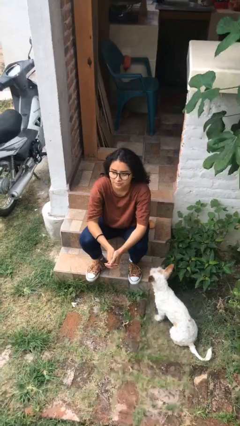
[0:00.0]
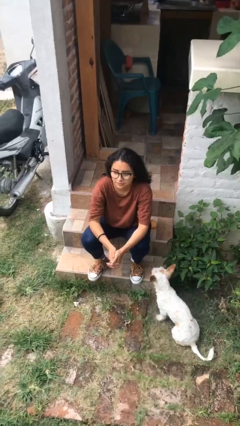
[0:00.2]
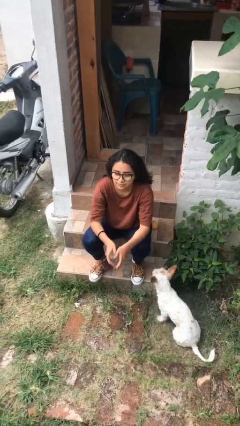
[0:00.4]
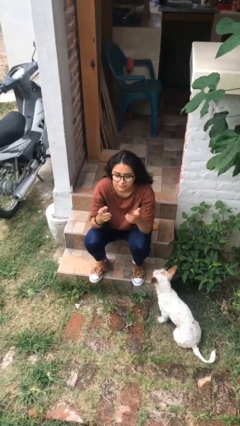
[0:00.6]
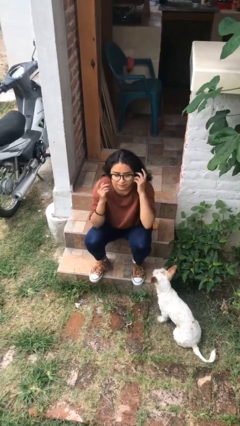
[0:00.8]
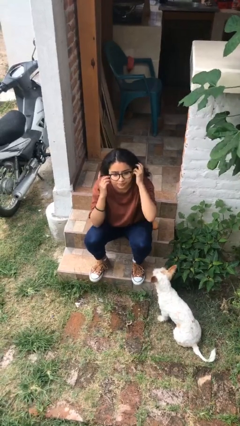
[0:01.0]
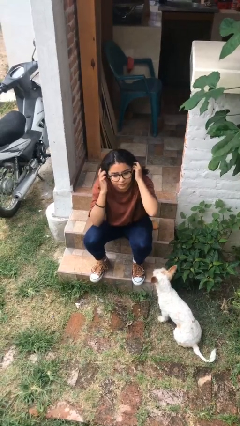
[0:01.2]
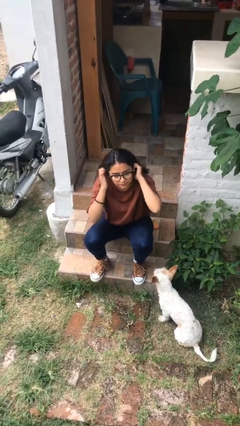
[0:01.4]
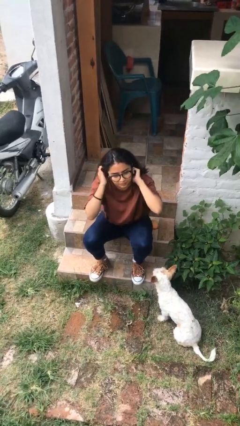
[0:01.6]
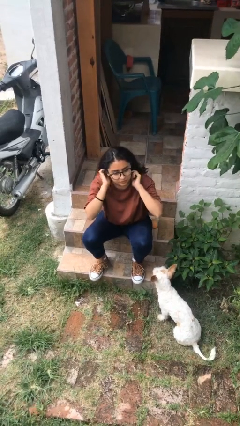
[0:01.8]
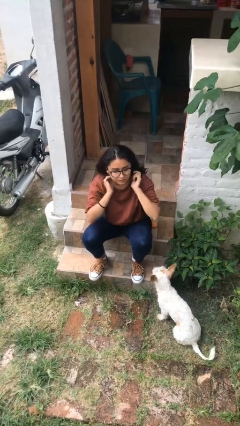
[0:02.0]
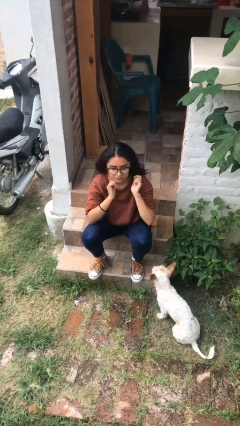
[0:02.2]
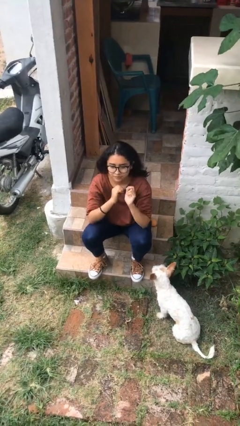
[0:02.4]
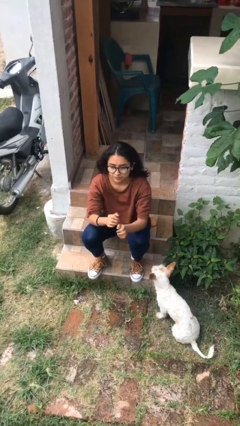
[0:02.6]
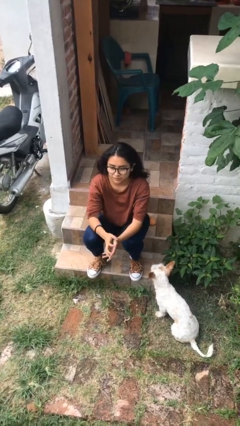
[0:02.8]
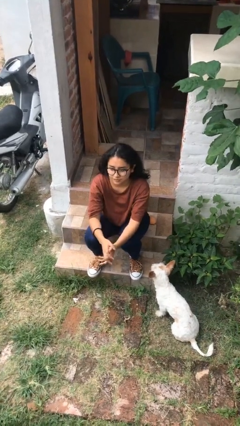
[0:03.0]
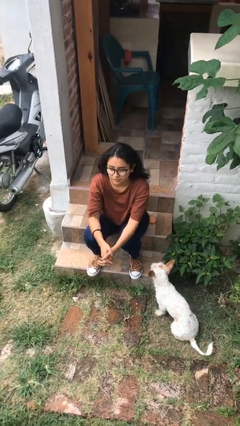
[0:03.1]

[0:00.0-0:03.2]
person strokes hair

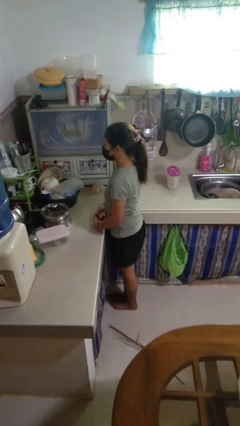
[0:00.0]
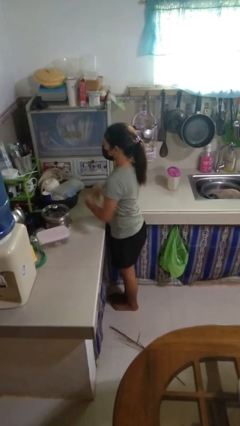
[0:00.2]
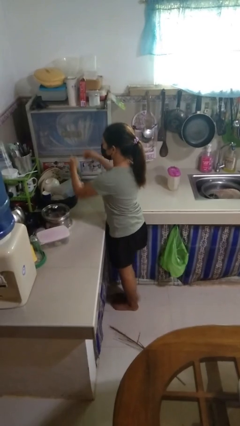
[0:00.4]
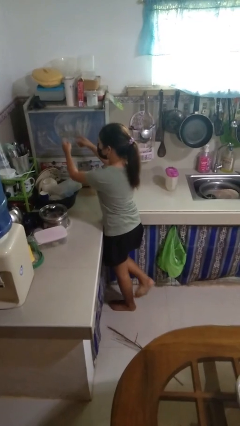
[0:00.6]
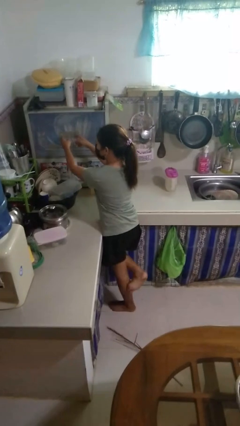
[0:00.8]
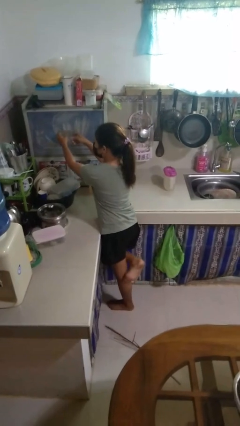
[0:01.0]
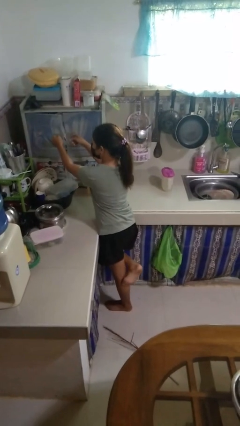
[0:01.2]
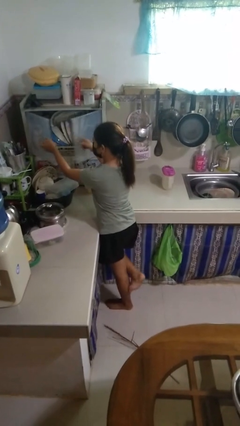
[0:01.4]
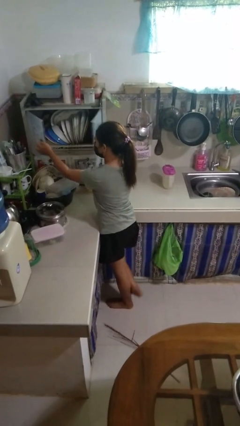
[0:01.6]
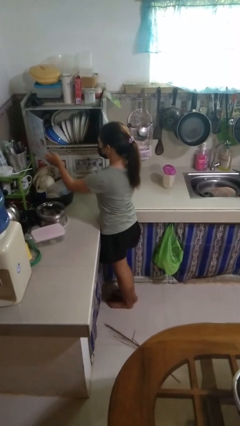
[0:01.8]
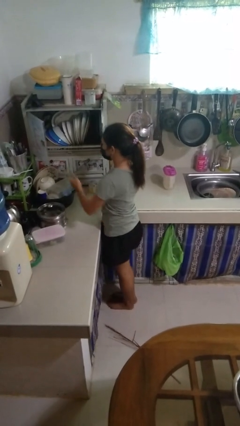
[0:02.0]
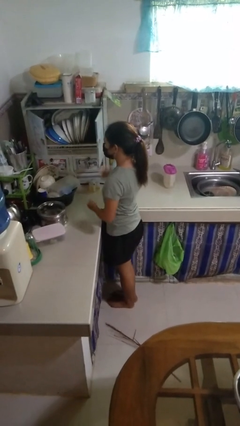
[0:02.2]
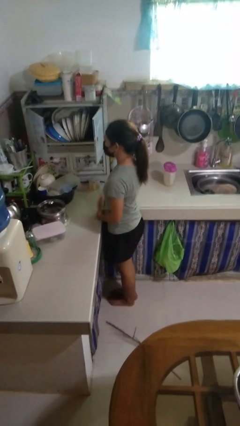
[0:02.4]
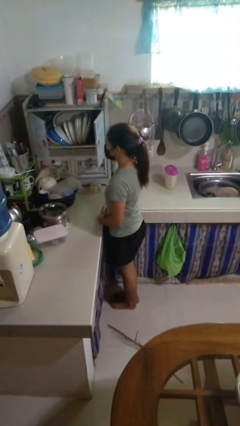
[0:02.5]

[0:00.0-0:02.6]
person opens kitchen drawer

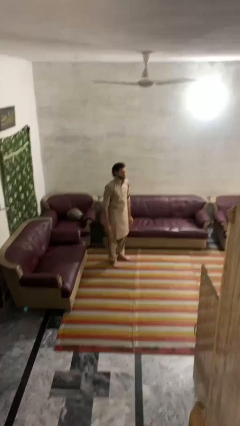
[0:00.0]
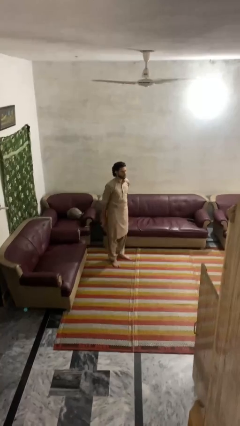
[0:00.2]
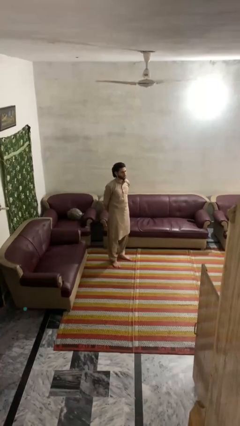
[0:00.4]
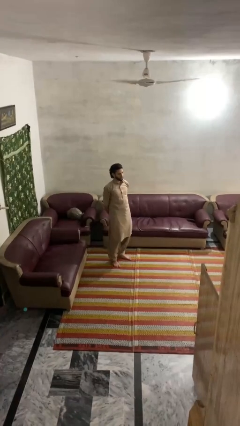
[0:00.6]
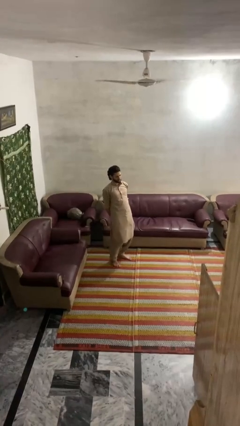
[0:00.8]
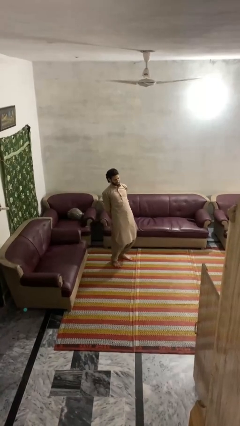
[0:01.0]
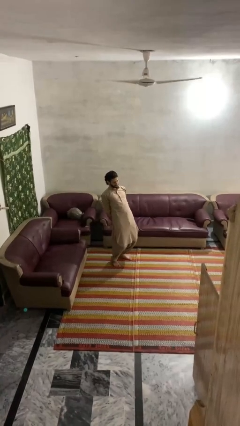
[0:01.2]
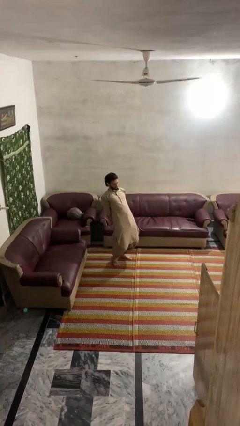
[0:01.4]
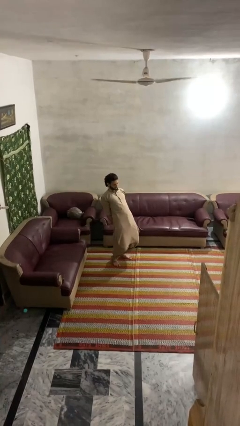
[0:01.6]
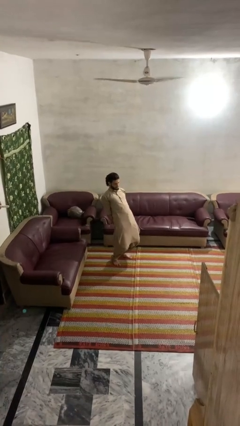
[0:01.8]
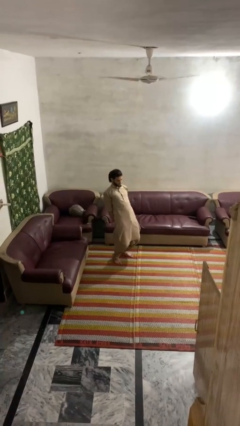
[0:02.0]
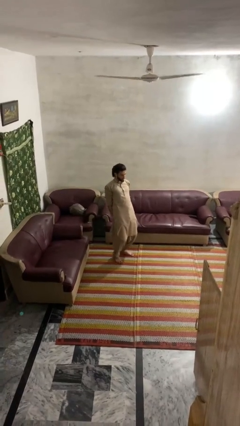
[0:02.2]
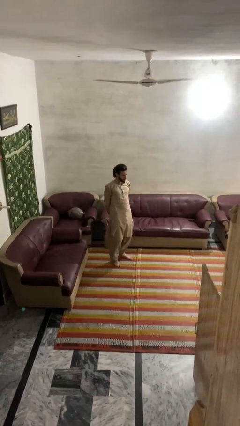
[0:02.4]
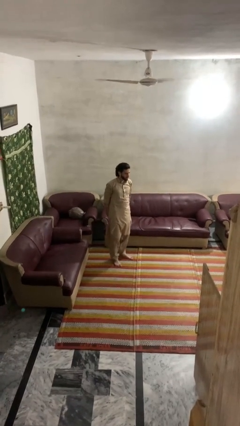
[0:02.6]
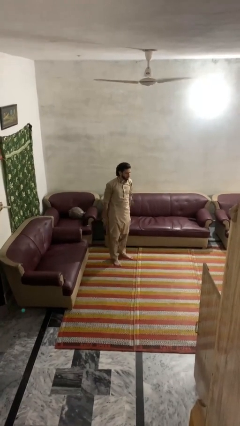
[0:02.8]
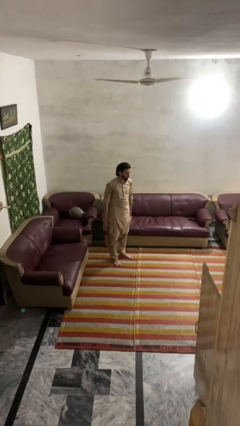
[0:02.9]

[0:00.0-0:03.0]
person stretches back

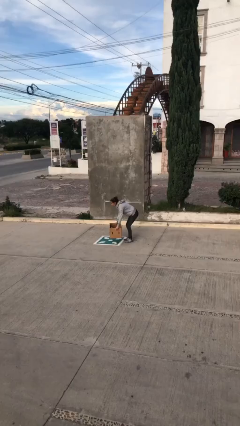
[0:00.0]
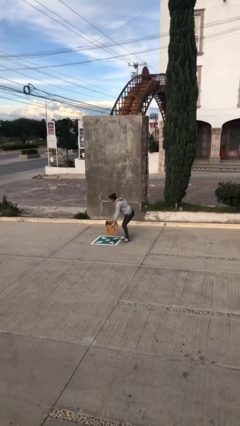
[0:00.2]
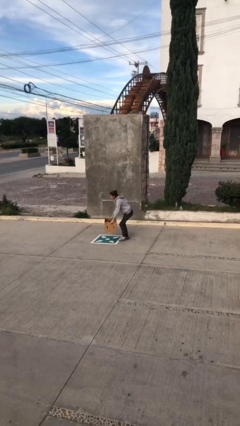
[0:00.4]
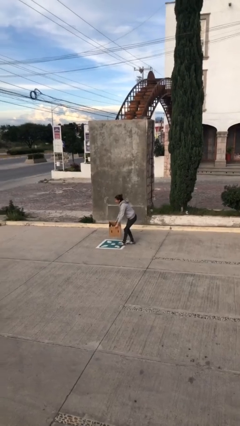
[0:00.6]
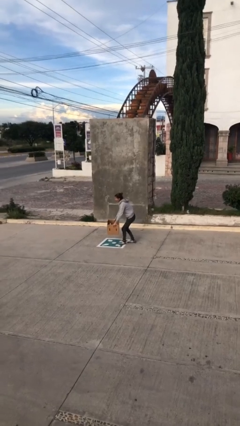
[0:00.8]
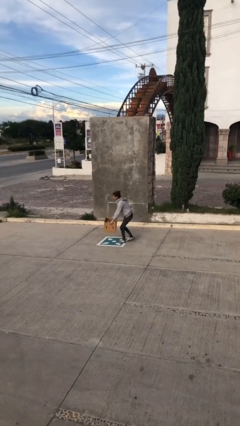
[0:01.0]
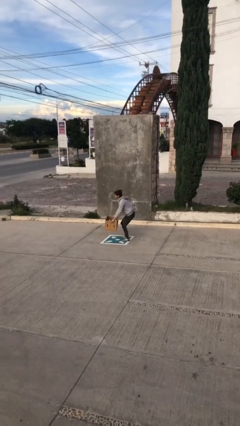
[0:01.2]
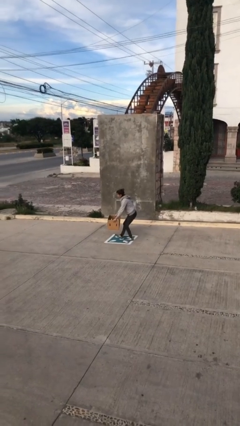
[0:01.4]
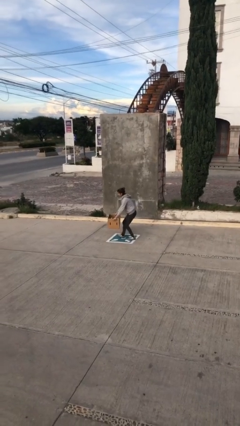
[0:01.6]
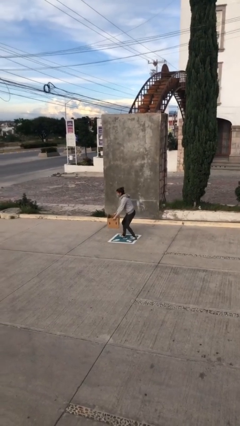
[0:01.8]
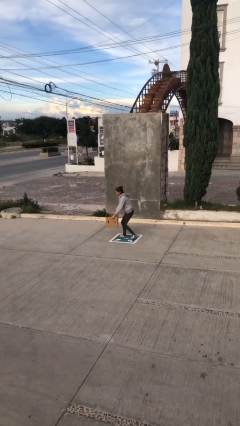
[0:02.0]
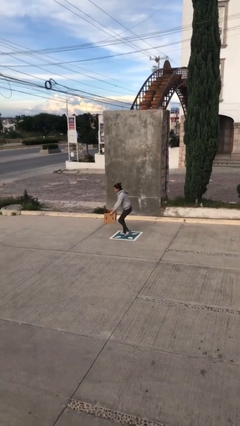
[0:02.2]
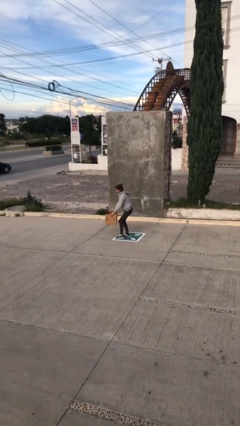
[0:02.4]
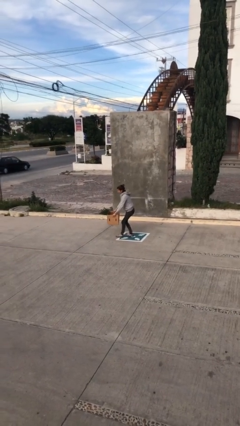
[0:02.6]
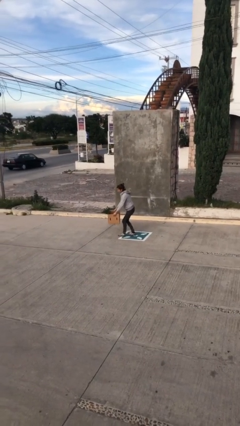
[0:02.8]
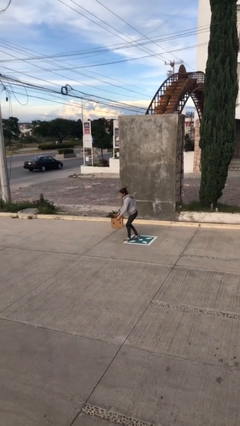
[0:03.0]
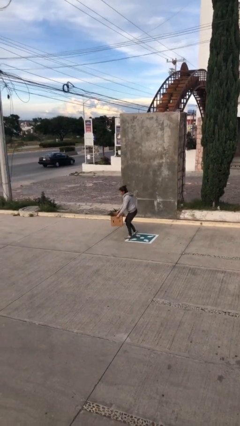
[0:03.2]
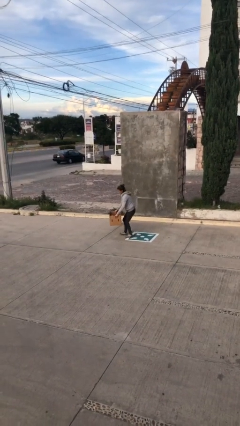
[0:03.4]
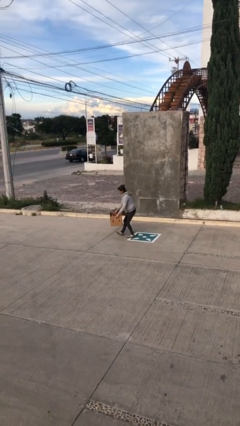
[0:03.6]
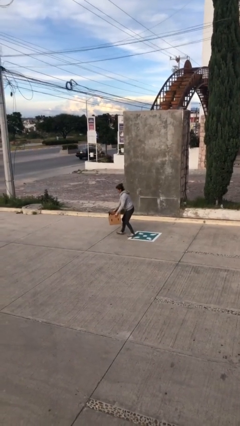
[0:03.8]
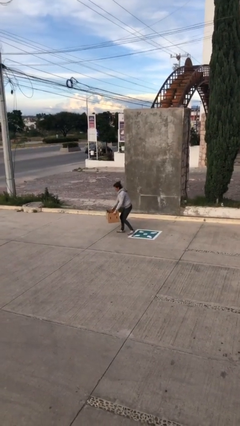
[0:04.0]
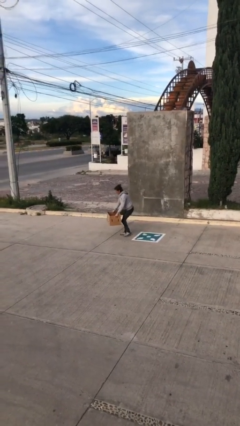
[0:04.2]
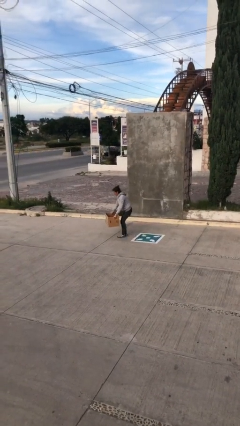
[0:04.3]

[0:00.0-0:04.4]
person carries heavy object

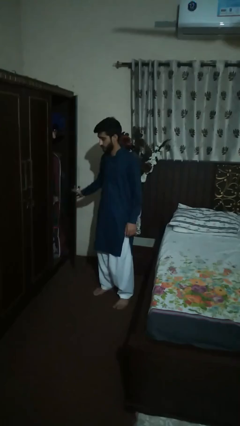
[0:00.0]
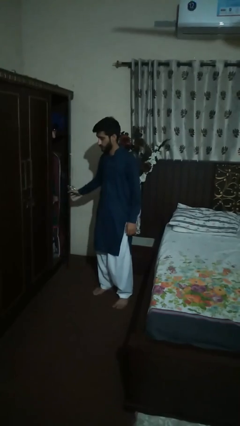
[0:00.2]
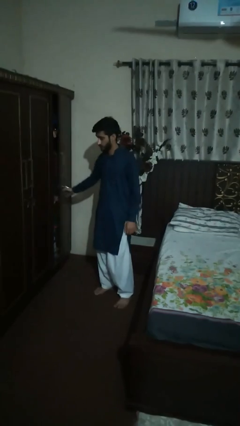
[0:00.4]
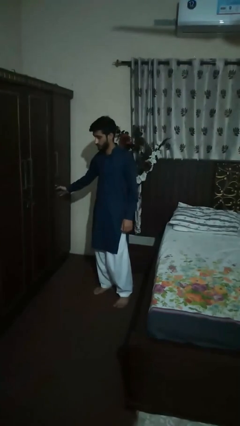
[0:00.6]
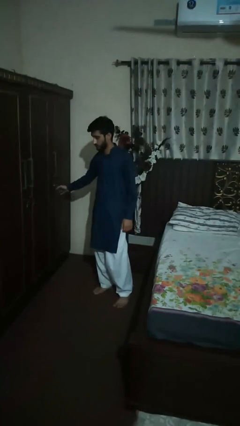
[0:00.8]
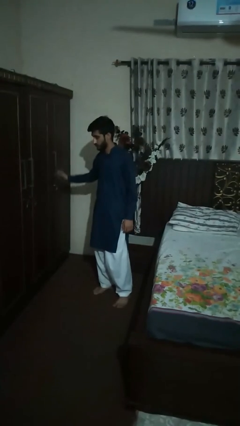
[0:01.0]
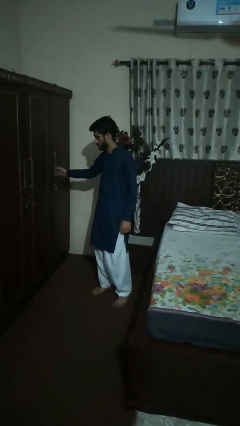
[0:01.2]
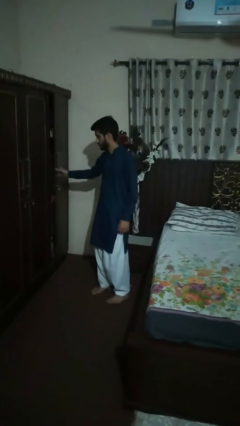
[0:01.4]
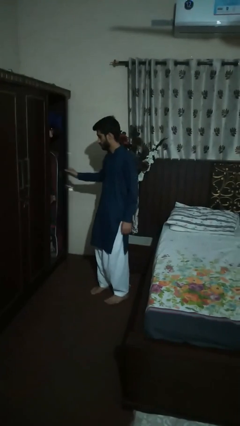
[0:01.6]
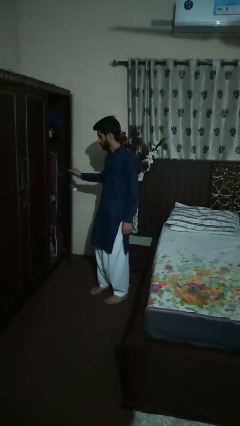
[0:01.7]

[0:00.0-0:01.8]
person opens dresser drawer

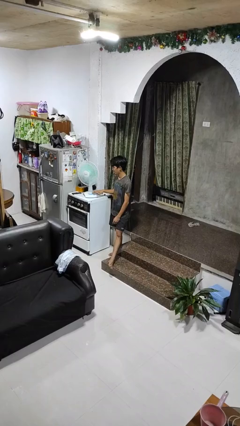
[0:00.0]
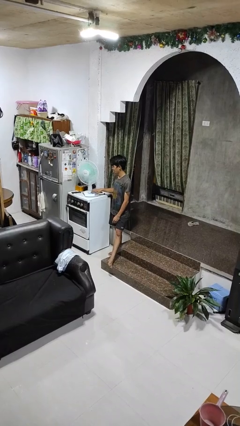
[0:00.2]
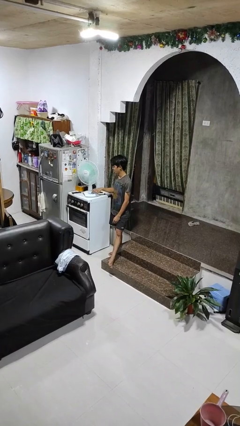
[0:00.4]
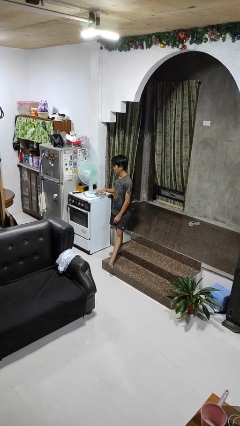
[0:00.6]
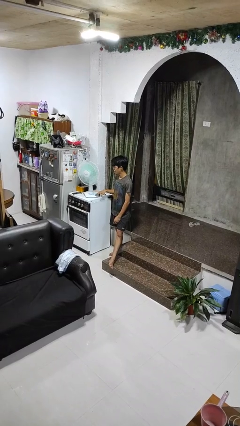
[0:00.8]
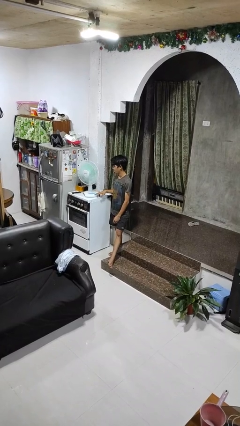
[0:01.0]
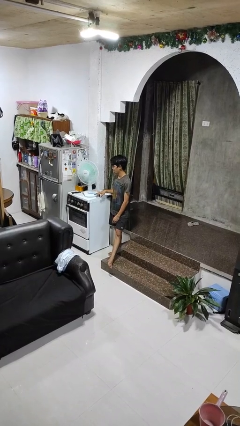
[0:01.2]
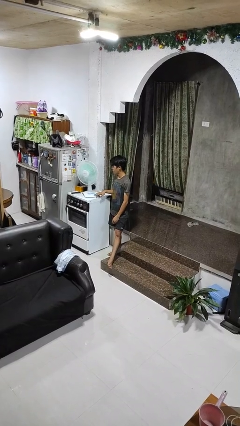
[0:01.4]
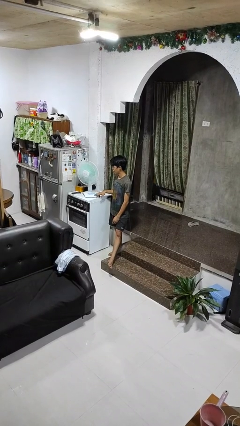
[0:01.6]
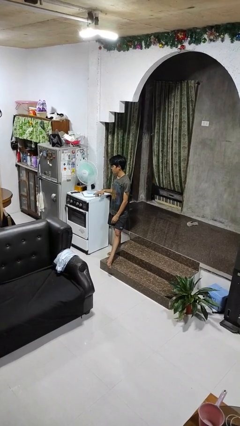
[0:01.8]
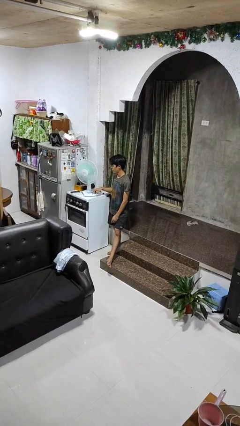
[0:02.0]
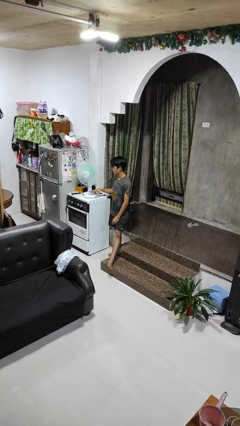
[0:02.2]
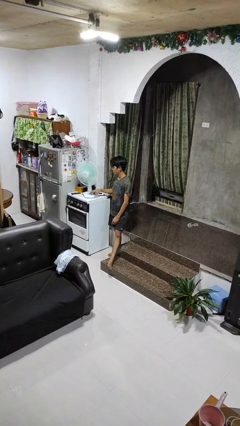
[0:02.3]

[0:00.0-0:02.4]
person turns on fan

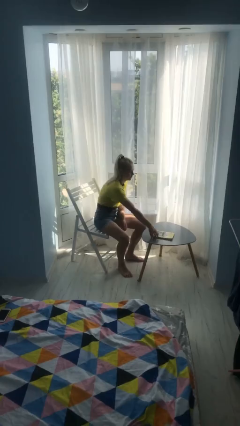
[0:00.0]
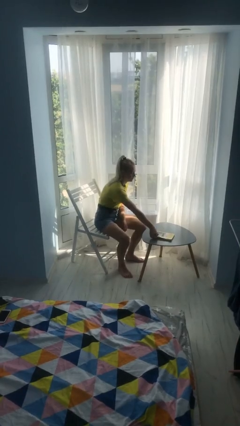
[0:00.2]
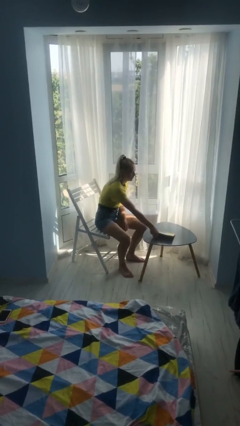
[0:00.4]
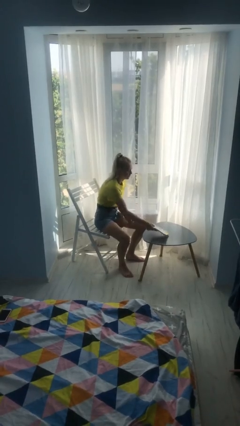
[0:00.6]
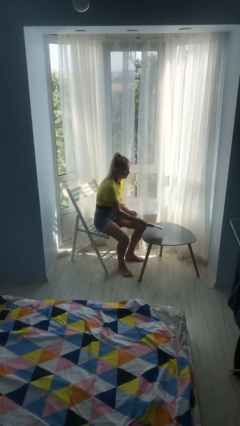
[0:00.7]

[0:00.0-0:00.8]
person picks up object from table
